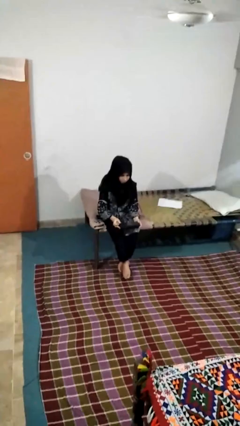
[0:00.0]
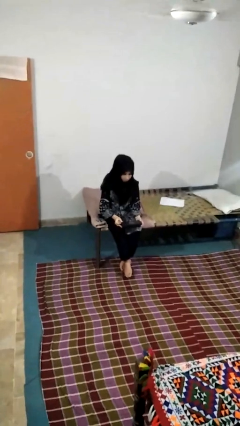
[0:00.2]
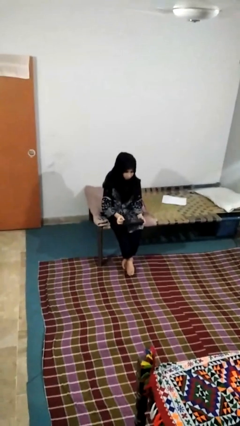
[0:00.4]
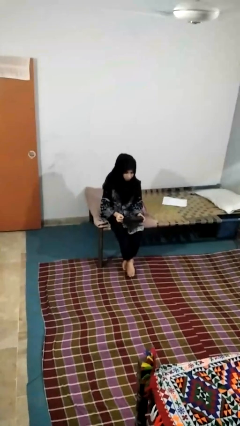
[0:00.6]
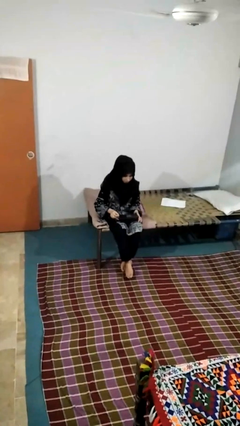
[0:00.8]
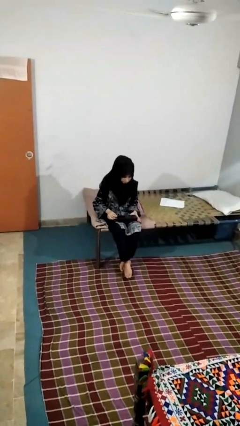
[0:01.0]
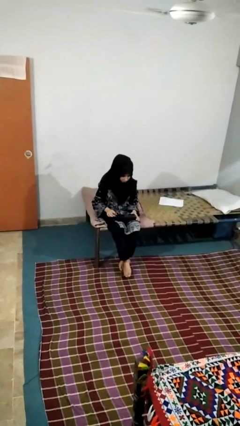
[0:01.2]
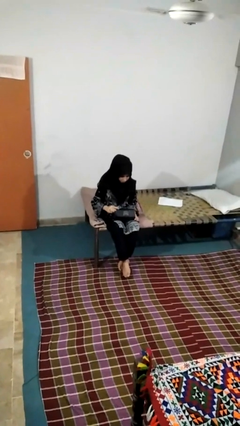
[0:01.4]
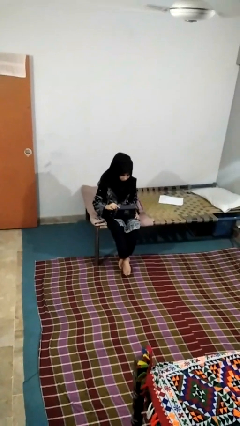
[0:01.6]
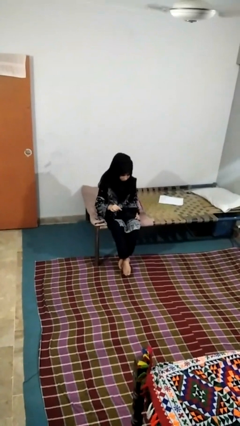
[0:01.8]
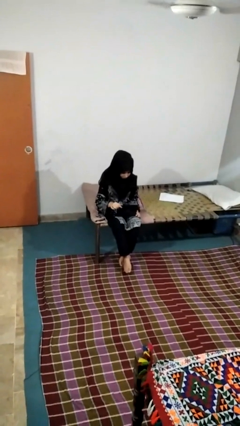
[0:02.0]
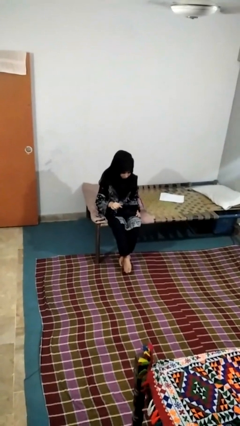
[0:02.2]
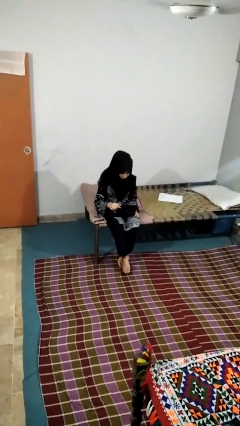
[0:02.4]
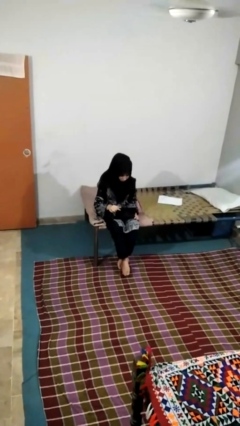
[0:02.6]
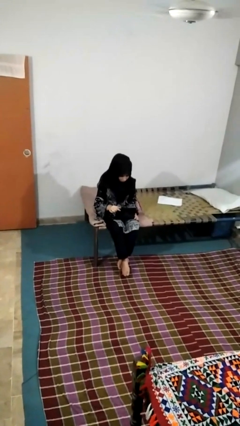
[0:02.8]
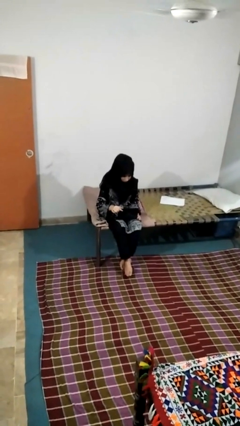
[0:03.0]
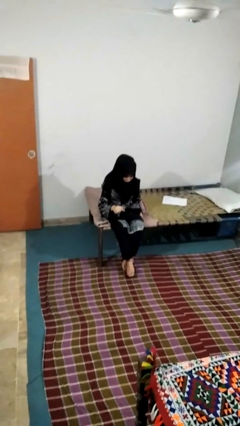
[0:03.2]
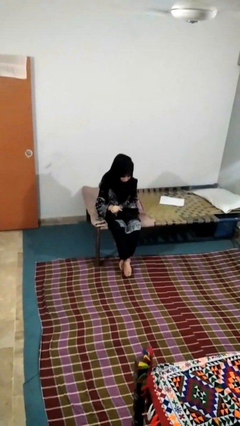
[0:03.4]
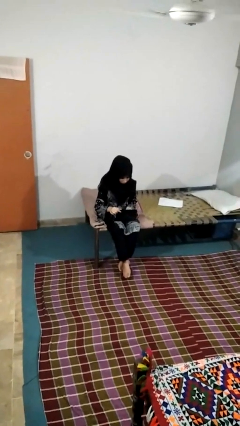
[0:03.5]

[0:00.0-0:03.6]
person opens jewelry box

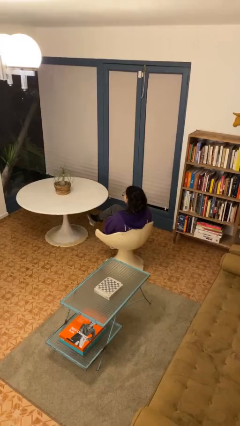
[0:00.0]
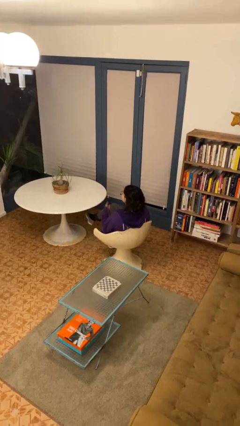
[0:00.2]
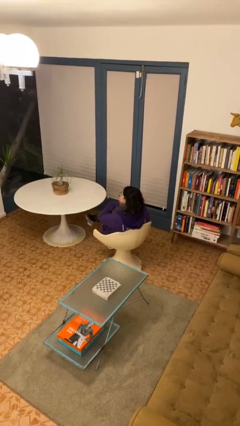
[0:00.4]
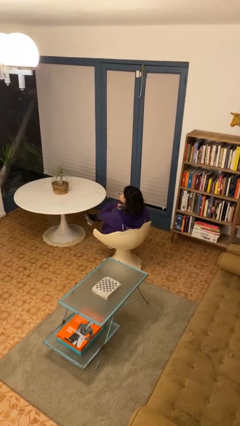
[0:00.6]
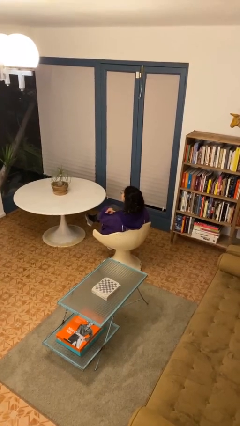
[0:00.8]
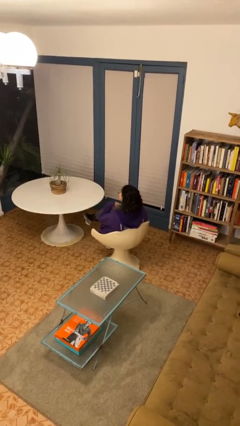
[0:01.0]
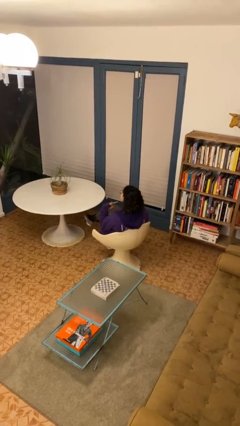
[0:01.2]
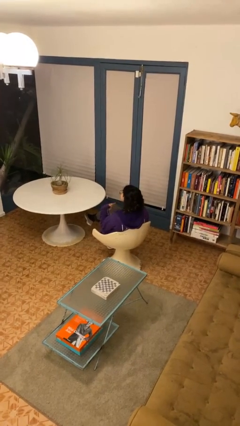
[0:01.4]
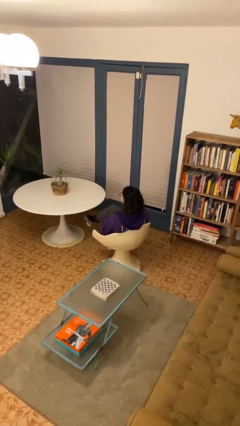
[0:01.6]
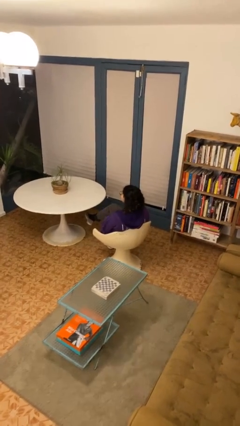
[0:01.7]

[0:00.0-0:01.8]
person gestures cut

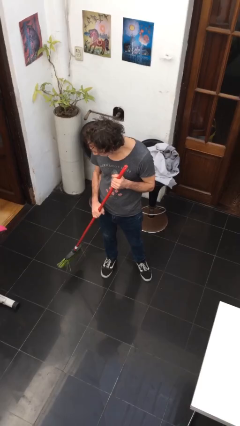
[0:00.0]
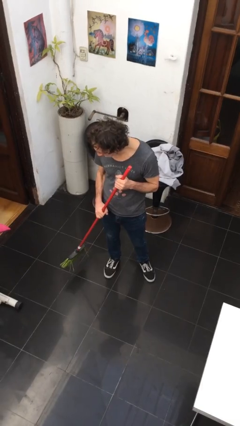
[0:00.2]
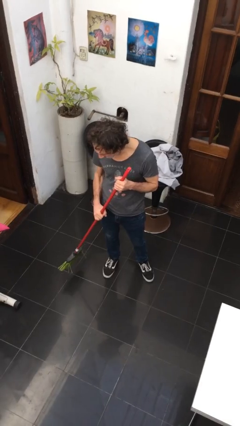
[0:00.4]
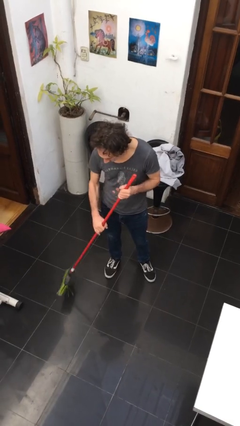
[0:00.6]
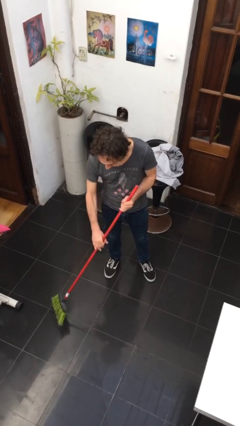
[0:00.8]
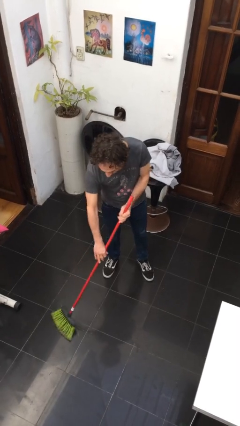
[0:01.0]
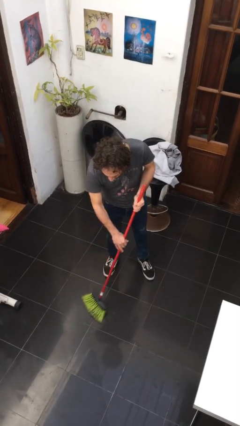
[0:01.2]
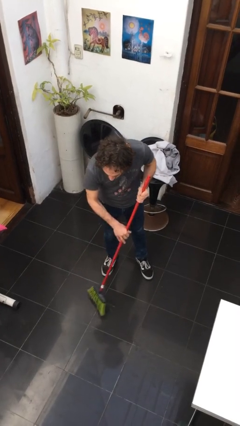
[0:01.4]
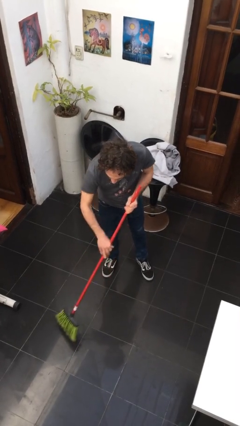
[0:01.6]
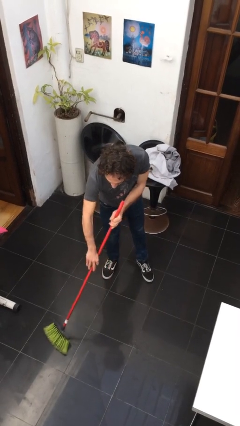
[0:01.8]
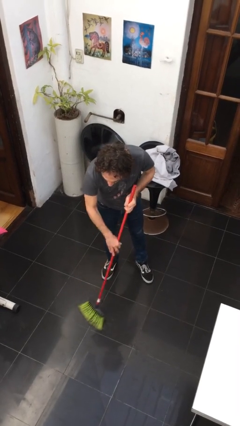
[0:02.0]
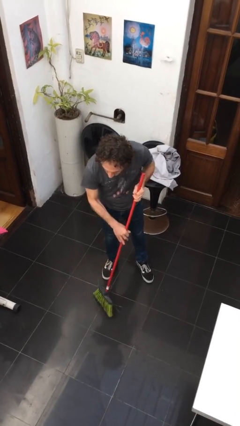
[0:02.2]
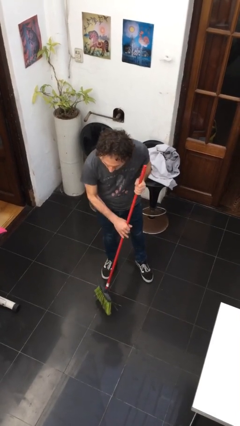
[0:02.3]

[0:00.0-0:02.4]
person sweeps floor

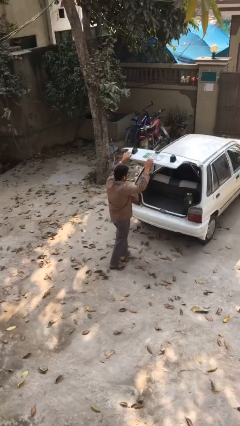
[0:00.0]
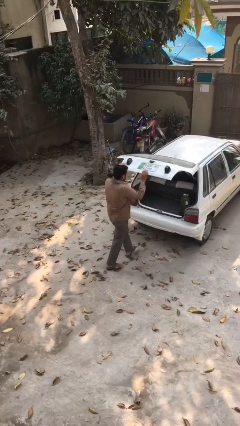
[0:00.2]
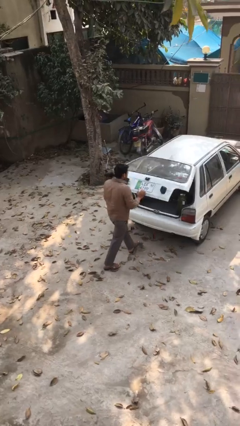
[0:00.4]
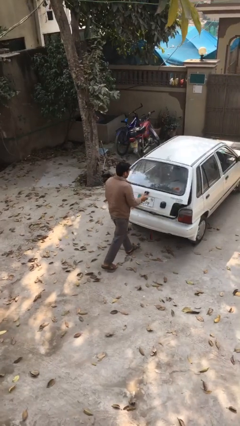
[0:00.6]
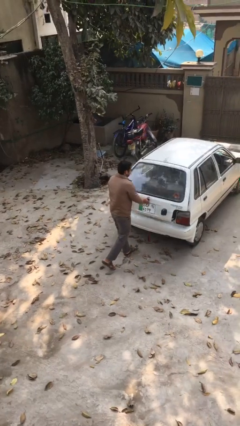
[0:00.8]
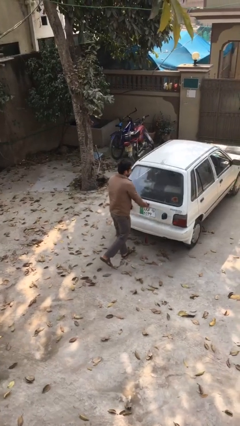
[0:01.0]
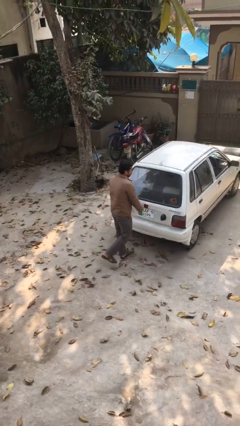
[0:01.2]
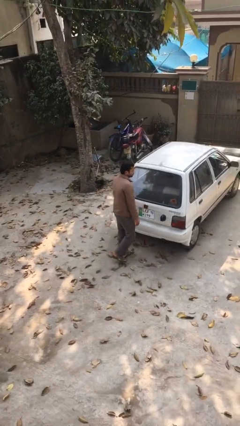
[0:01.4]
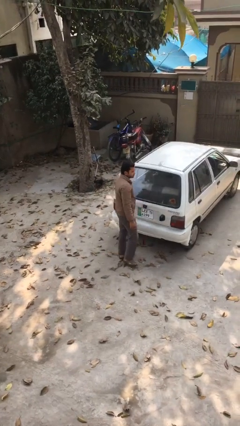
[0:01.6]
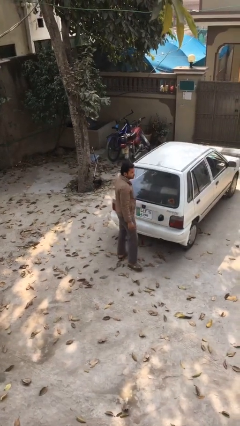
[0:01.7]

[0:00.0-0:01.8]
person closes car trunk

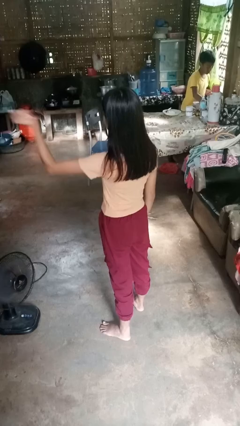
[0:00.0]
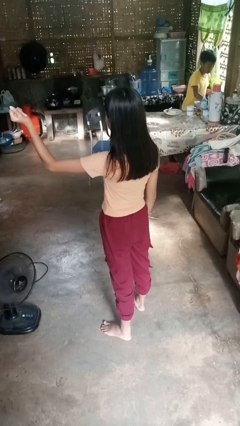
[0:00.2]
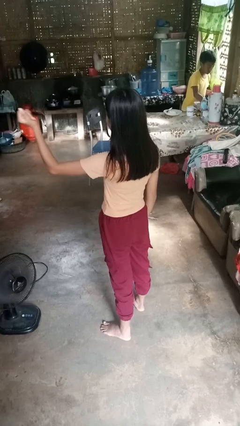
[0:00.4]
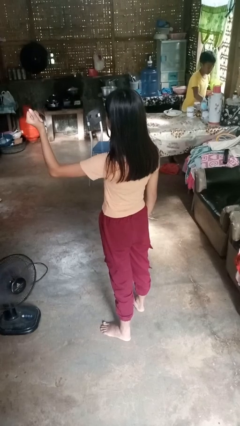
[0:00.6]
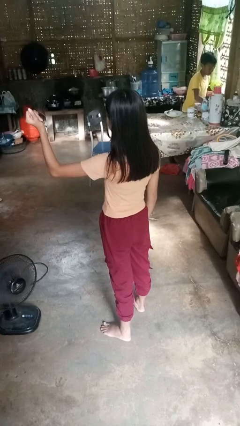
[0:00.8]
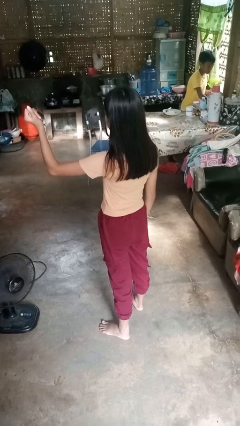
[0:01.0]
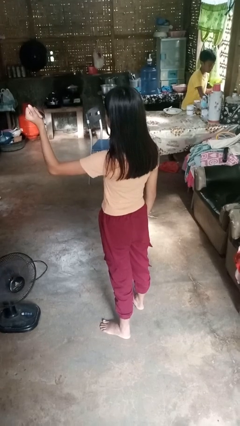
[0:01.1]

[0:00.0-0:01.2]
person snaps fingers

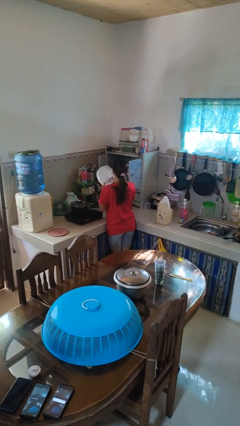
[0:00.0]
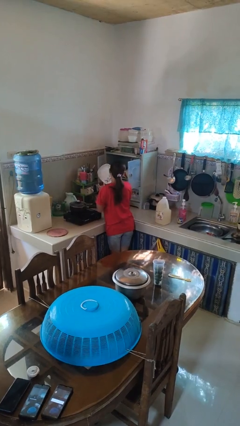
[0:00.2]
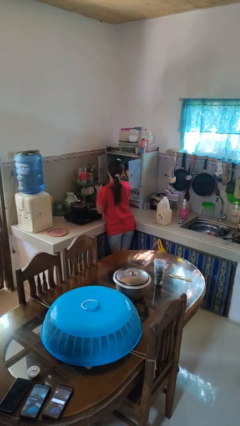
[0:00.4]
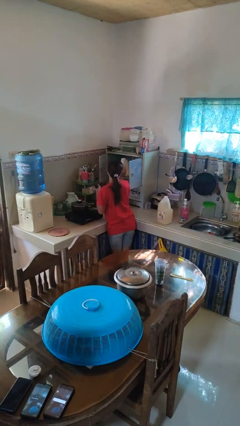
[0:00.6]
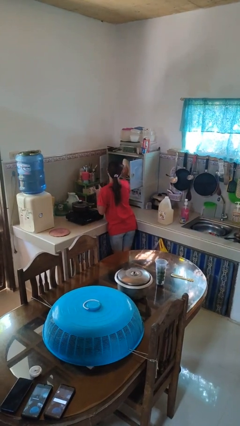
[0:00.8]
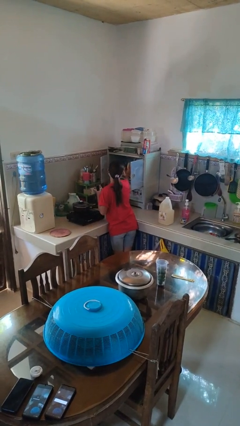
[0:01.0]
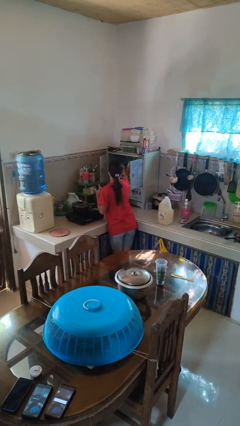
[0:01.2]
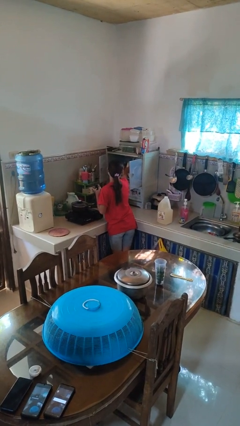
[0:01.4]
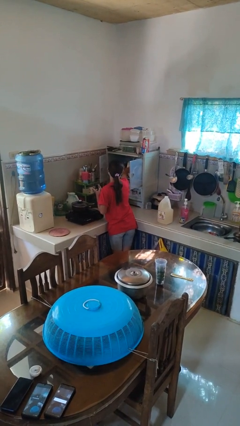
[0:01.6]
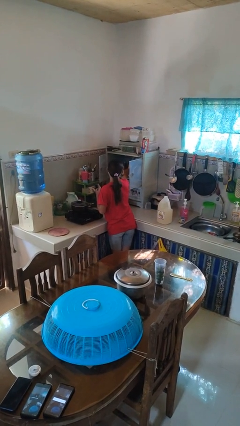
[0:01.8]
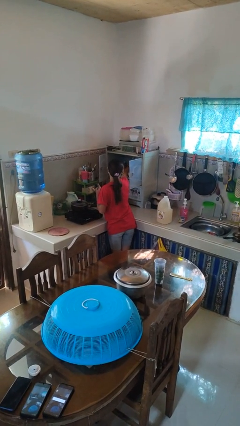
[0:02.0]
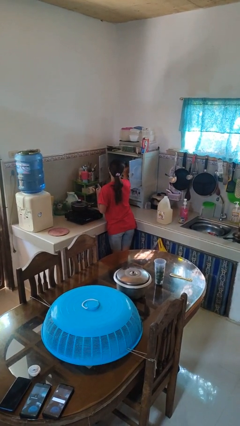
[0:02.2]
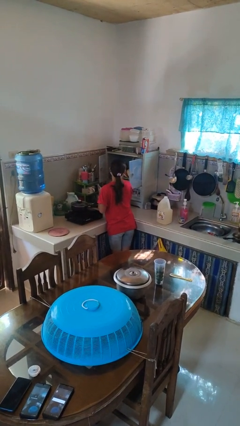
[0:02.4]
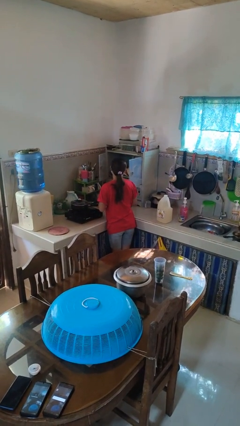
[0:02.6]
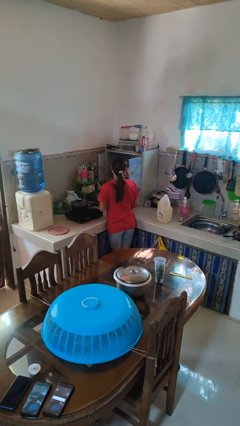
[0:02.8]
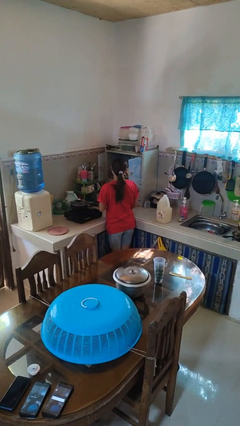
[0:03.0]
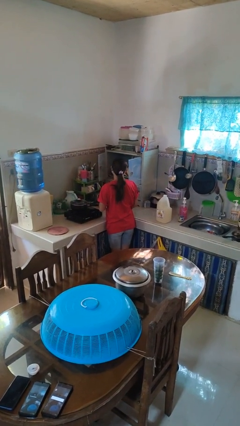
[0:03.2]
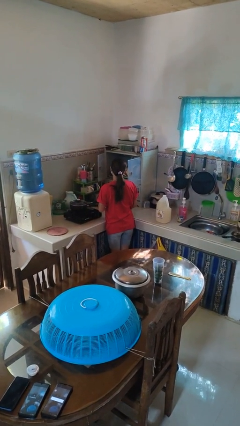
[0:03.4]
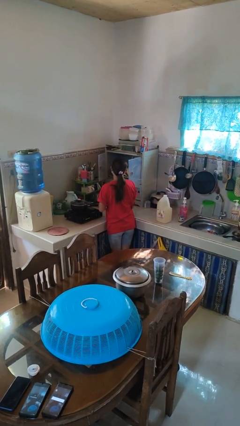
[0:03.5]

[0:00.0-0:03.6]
person puts object in cabinet

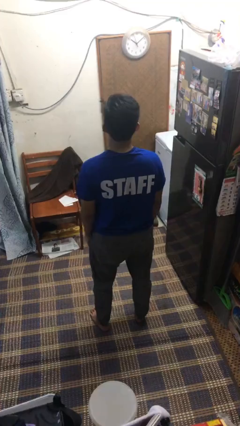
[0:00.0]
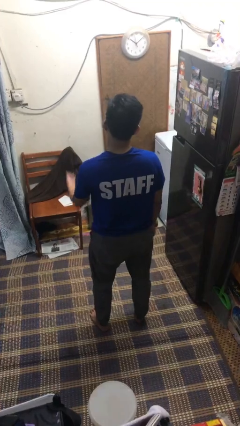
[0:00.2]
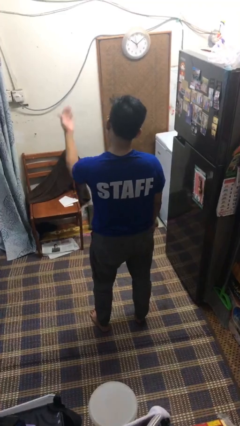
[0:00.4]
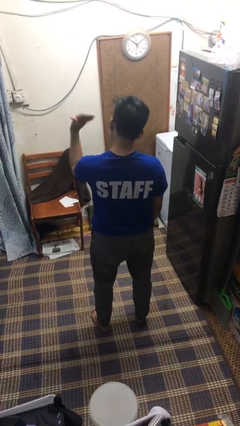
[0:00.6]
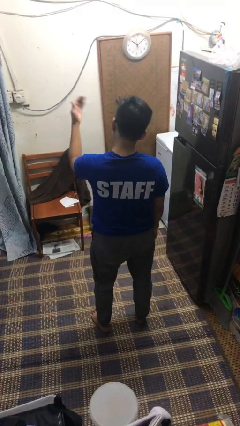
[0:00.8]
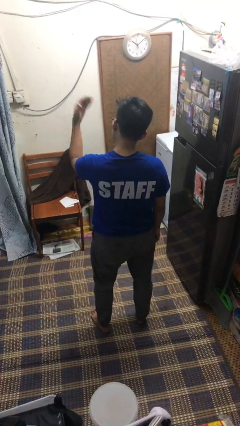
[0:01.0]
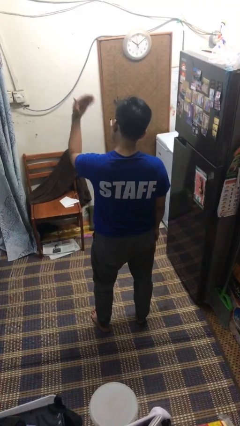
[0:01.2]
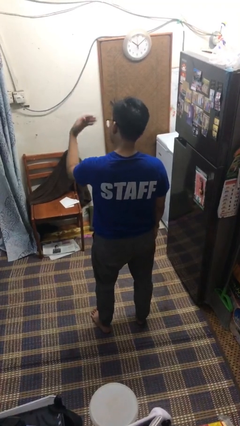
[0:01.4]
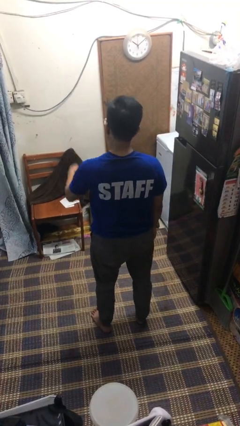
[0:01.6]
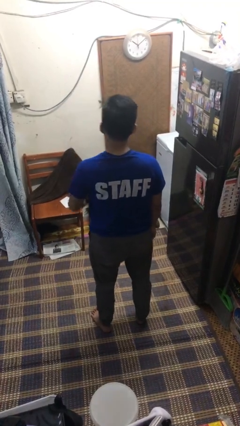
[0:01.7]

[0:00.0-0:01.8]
person gestures come here

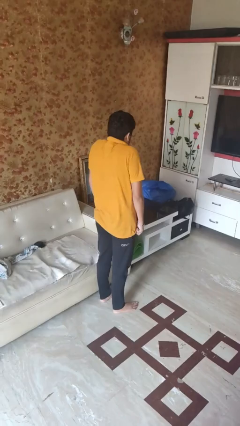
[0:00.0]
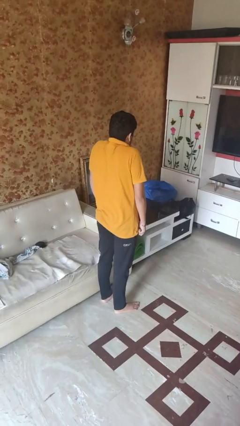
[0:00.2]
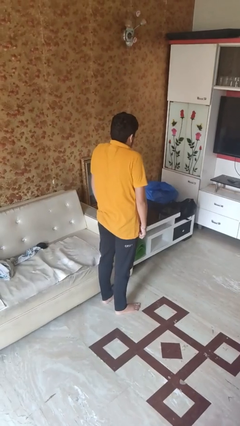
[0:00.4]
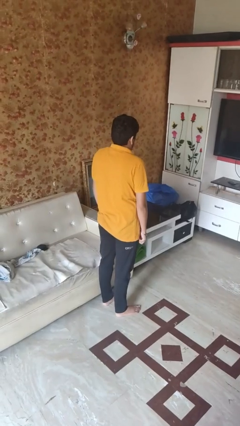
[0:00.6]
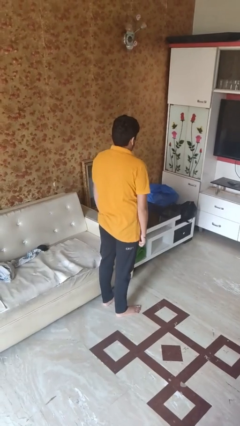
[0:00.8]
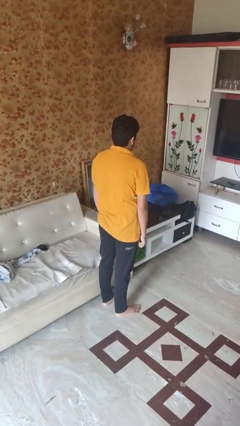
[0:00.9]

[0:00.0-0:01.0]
person shrugs
